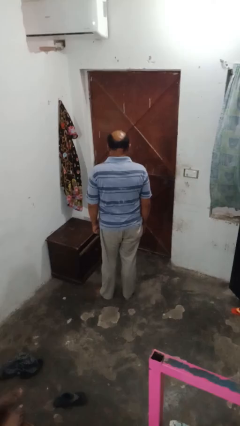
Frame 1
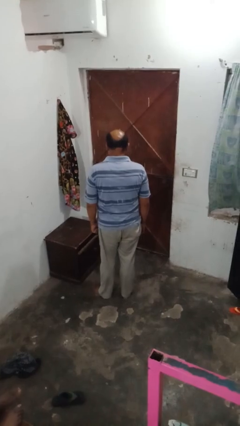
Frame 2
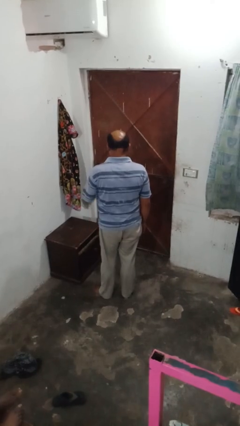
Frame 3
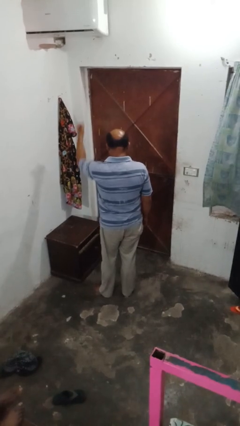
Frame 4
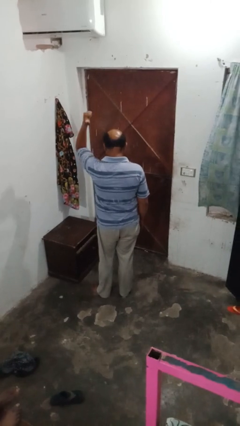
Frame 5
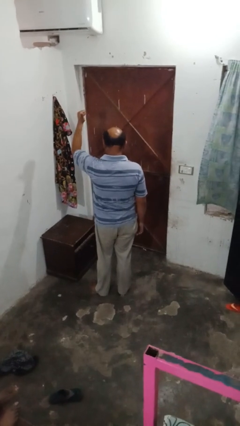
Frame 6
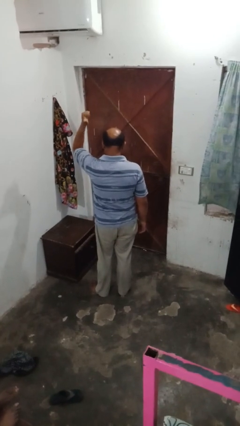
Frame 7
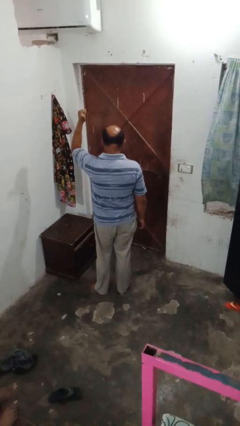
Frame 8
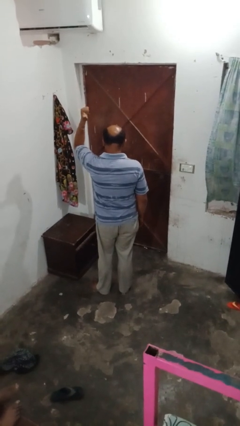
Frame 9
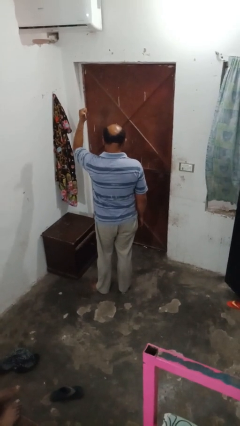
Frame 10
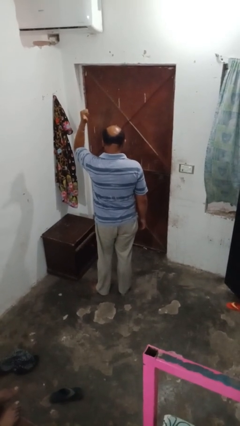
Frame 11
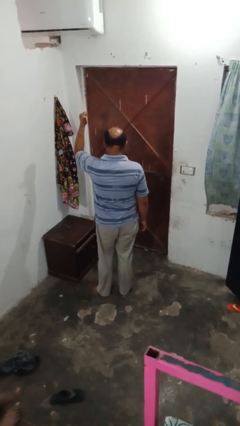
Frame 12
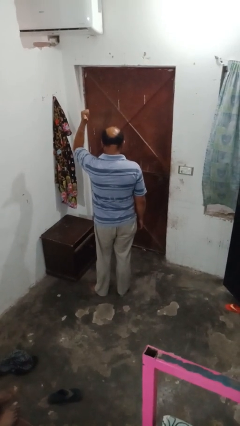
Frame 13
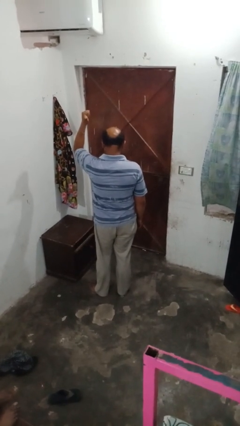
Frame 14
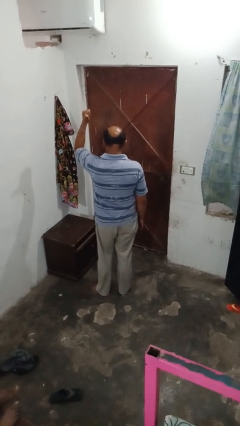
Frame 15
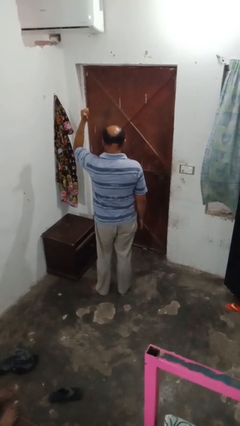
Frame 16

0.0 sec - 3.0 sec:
person gestures behind me

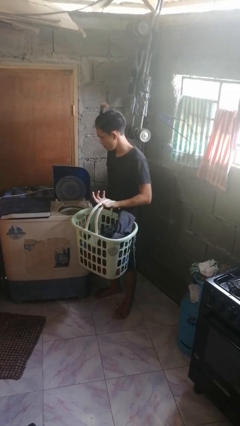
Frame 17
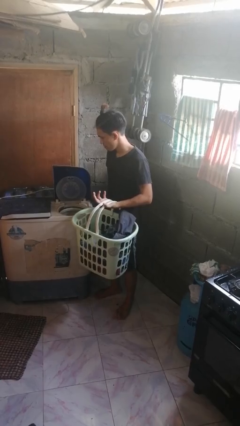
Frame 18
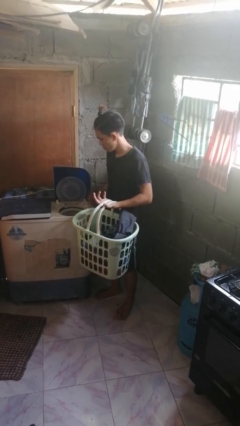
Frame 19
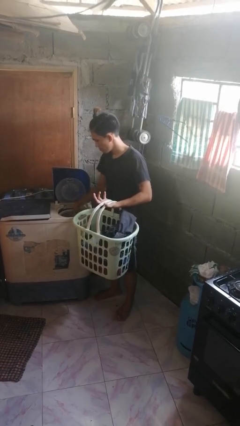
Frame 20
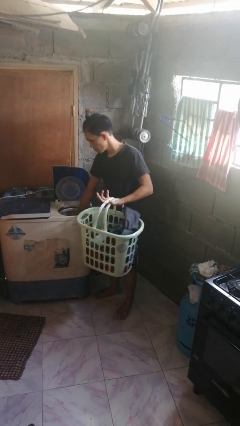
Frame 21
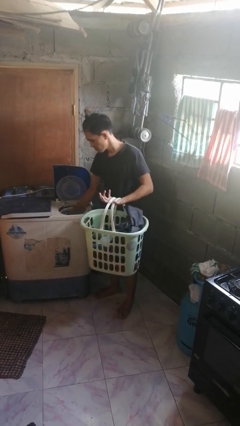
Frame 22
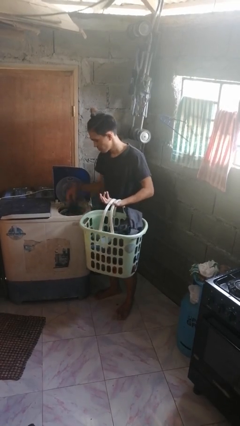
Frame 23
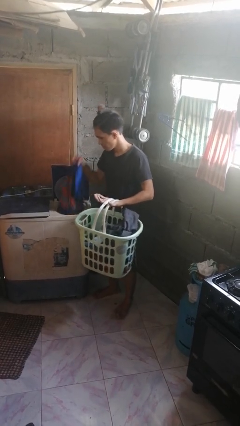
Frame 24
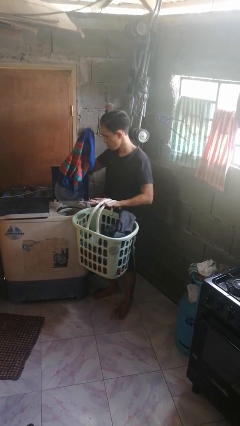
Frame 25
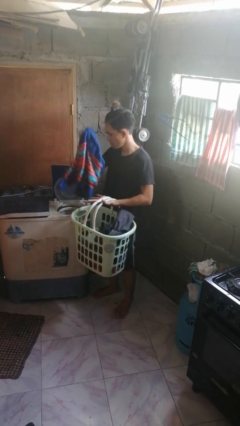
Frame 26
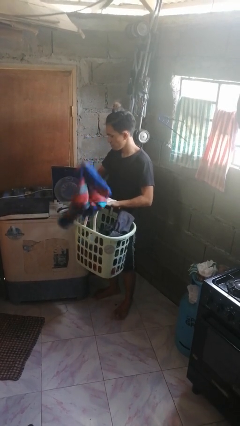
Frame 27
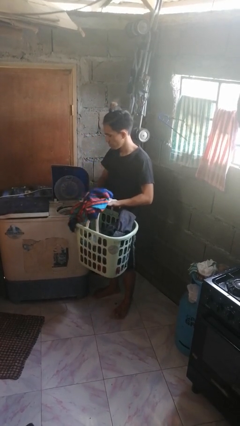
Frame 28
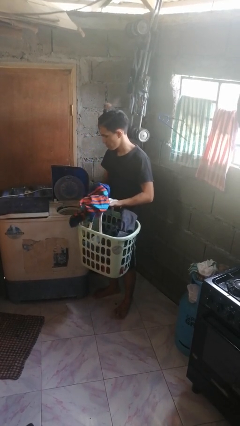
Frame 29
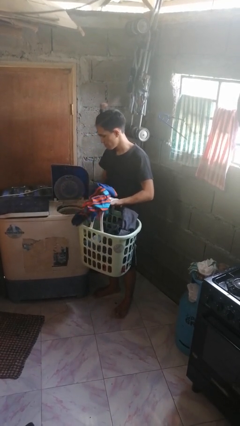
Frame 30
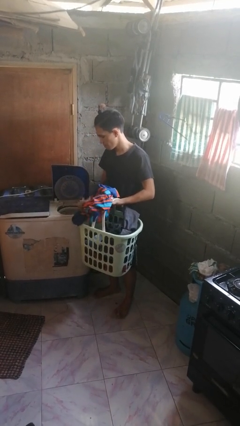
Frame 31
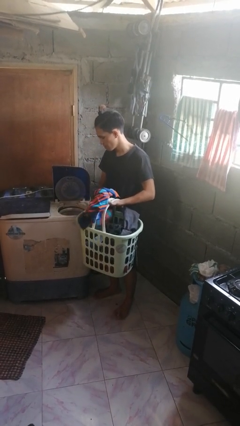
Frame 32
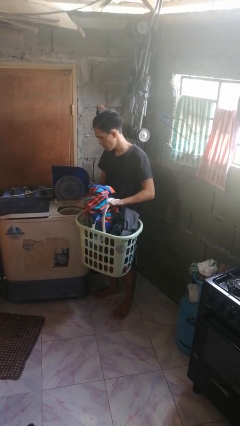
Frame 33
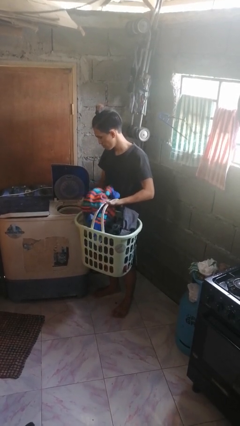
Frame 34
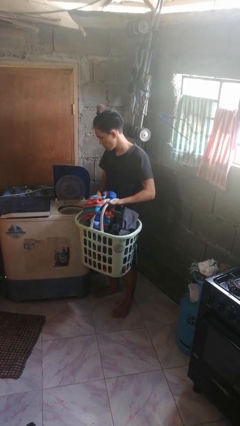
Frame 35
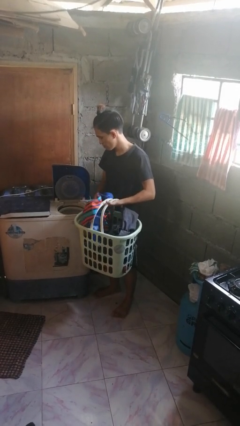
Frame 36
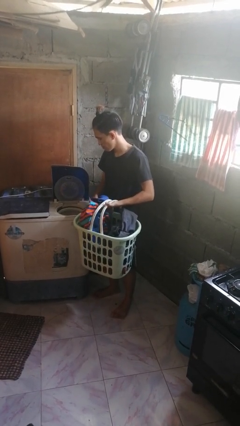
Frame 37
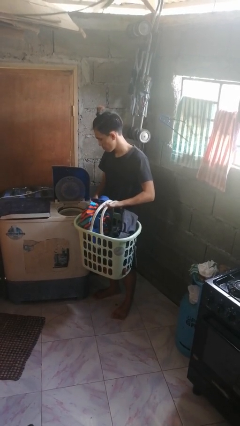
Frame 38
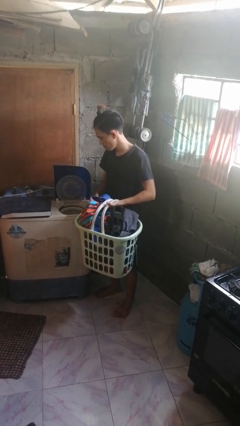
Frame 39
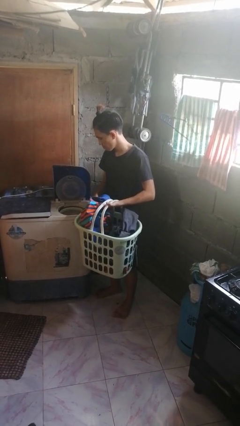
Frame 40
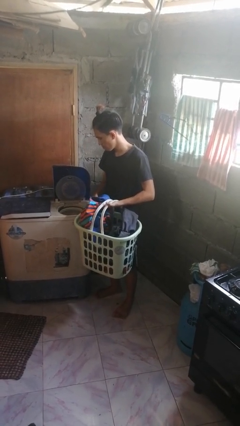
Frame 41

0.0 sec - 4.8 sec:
person unloads dryer

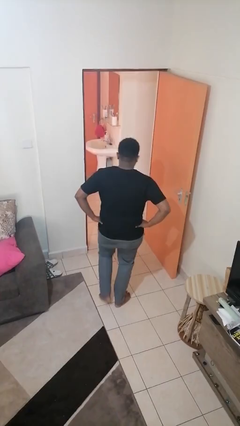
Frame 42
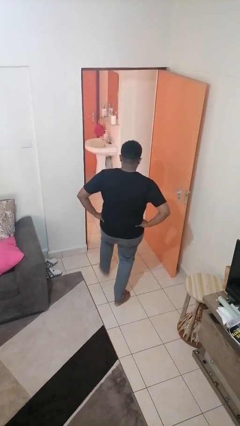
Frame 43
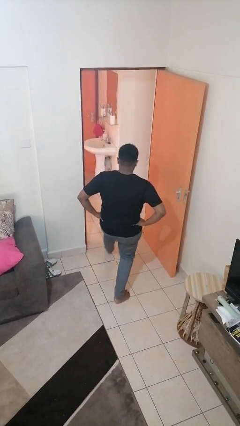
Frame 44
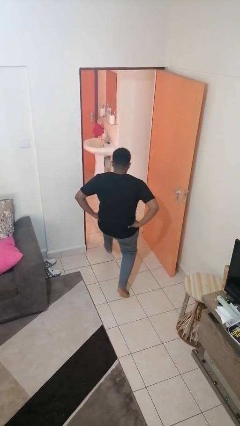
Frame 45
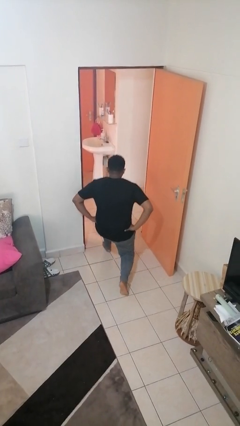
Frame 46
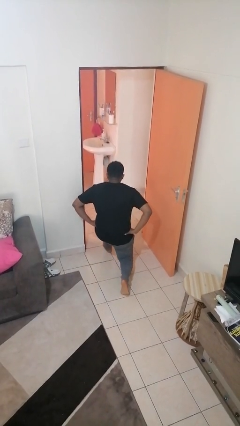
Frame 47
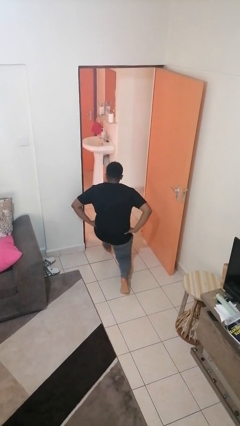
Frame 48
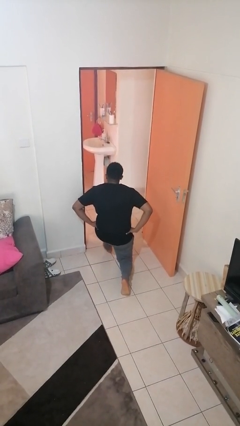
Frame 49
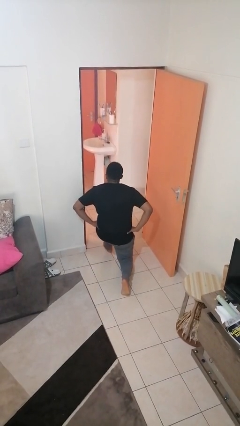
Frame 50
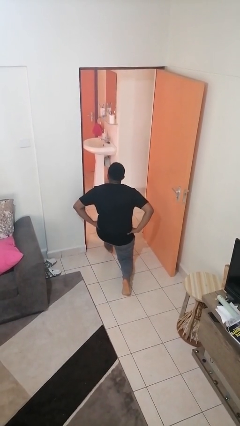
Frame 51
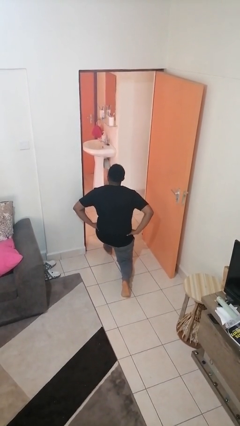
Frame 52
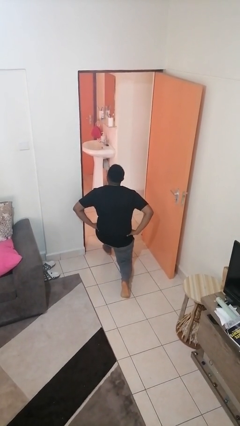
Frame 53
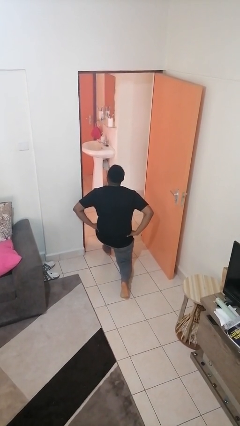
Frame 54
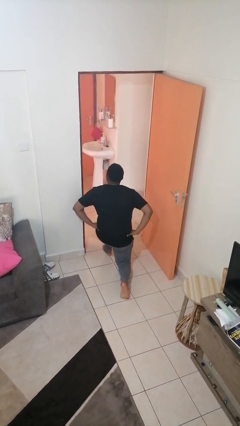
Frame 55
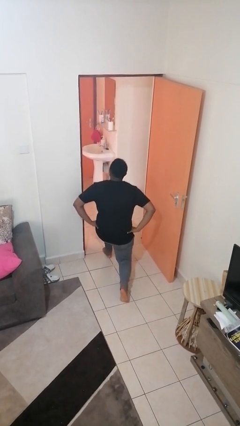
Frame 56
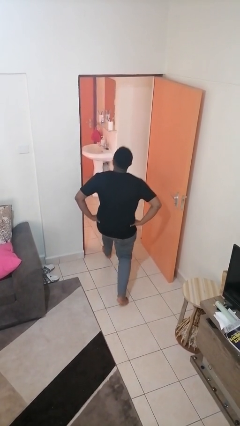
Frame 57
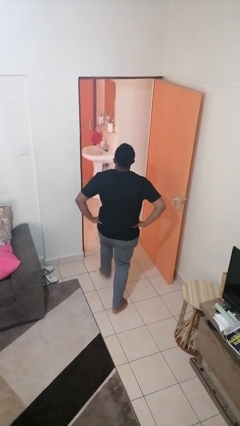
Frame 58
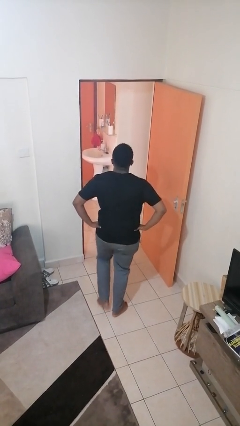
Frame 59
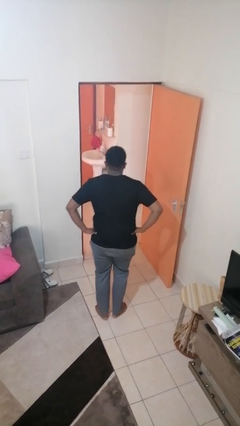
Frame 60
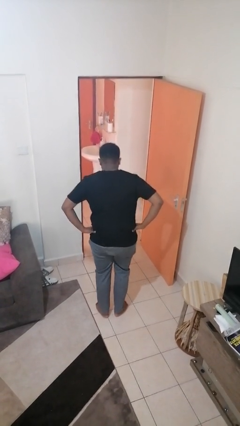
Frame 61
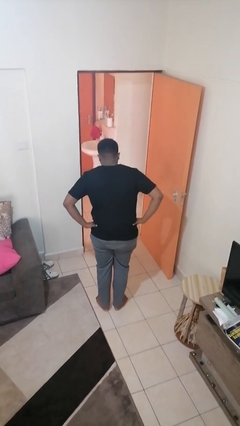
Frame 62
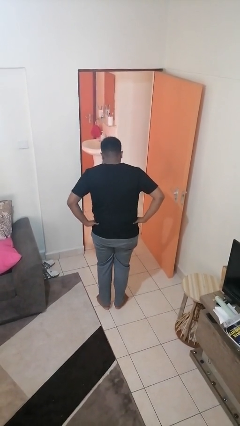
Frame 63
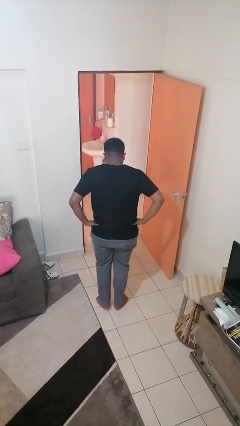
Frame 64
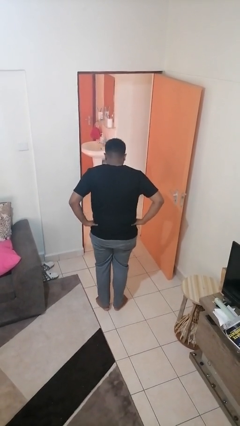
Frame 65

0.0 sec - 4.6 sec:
person exercises with lunges

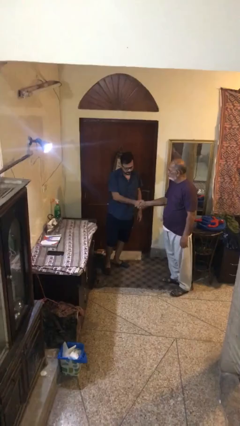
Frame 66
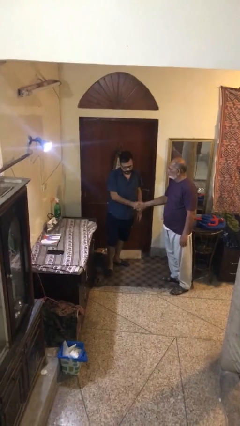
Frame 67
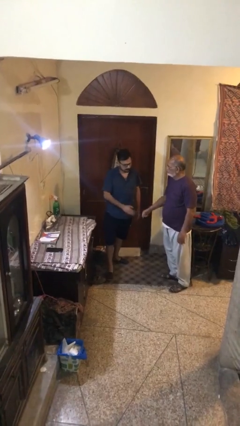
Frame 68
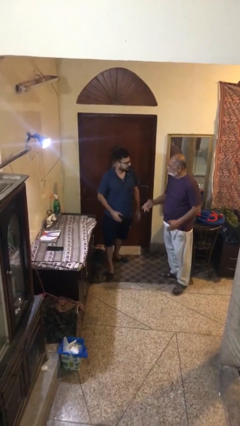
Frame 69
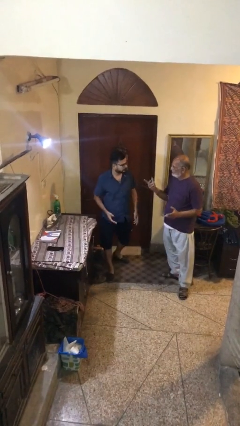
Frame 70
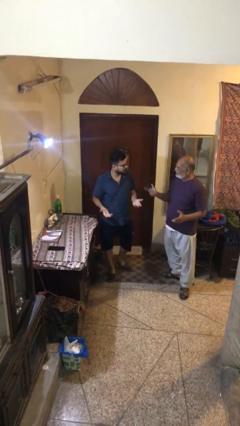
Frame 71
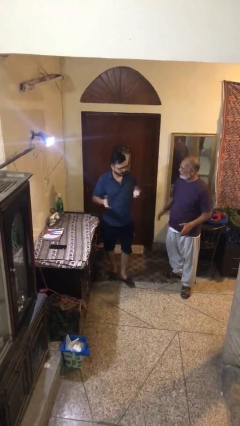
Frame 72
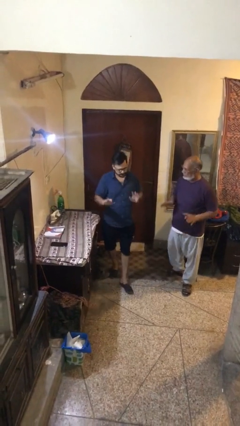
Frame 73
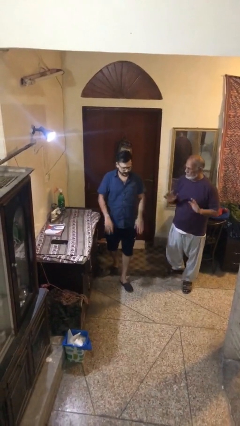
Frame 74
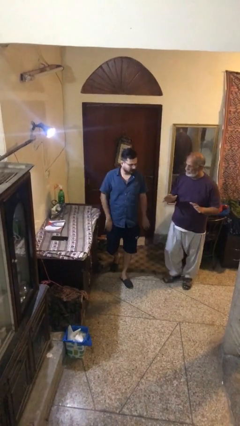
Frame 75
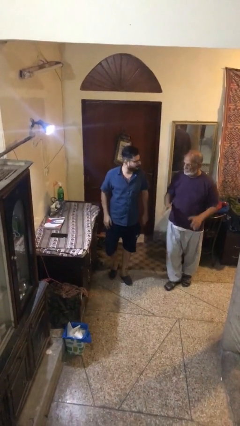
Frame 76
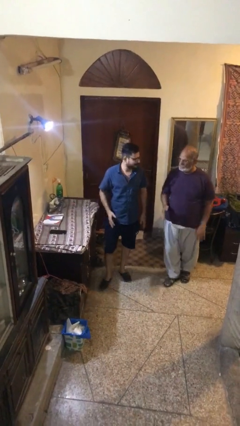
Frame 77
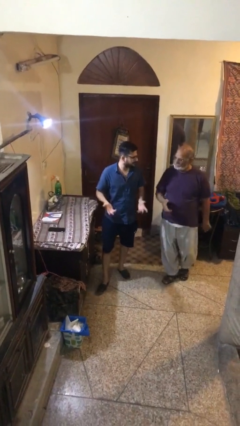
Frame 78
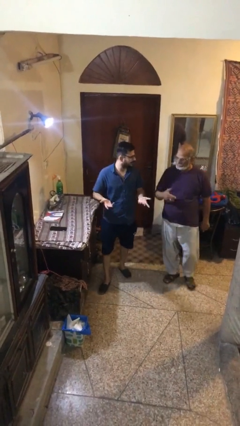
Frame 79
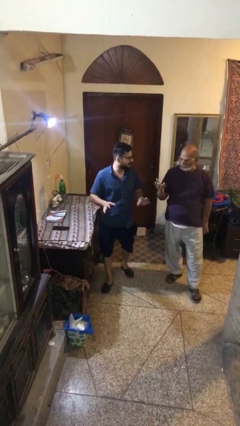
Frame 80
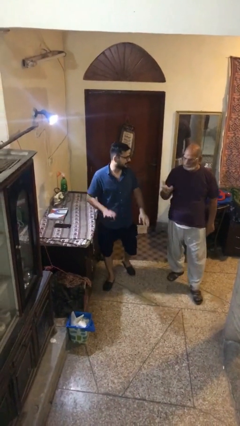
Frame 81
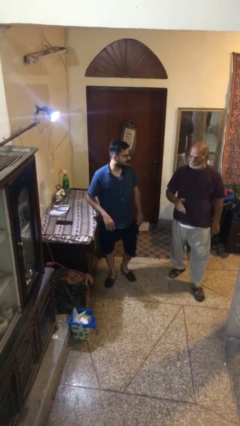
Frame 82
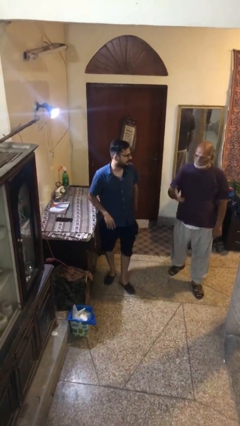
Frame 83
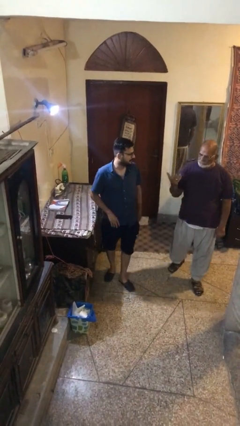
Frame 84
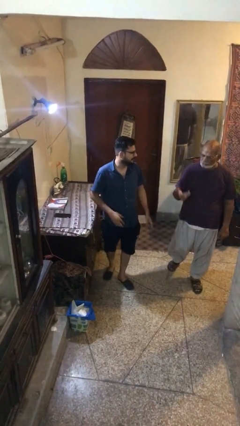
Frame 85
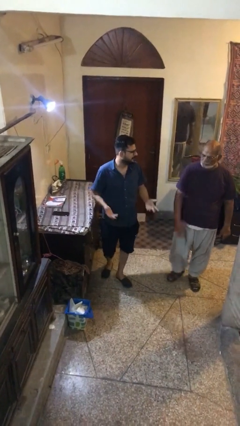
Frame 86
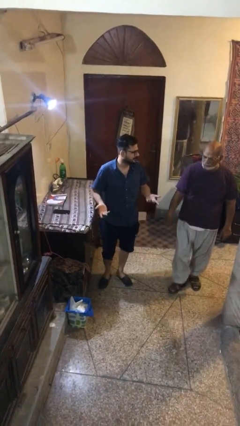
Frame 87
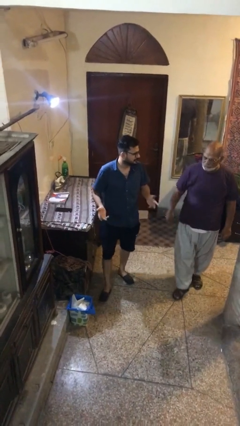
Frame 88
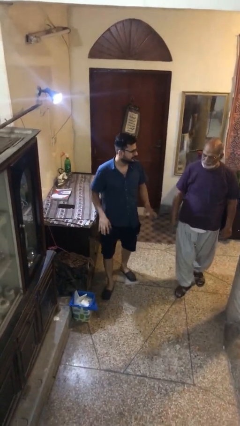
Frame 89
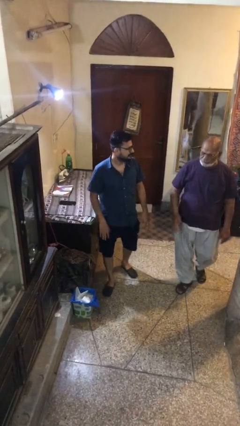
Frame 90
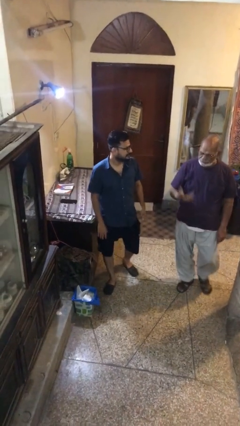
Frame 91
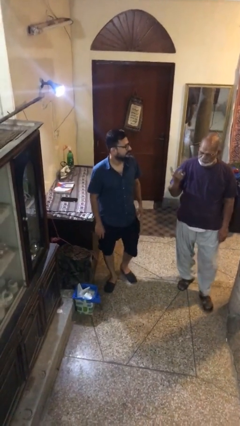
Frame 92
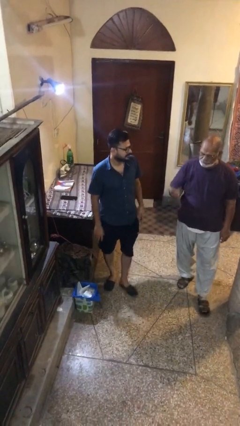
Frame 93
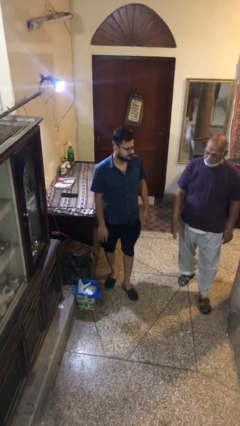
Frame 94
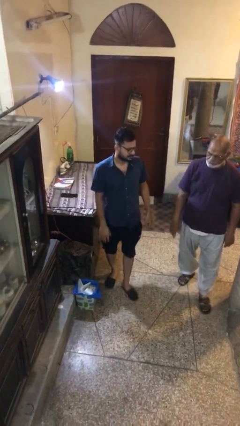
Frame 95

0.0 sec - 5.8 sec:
person talks to person
